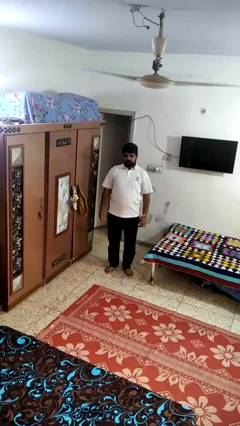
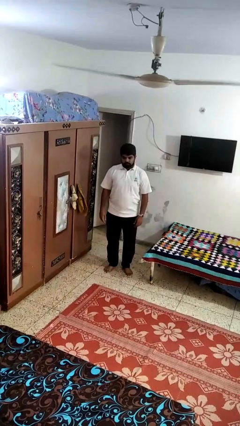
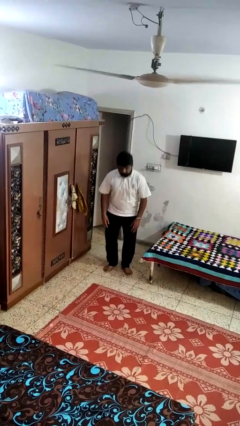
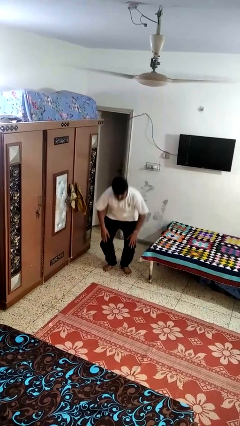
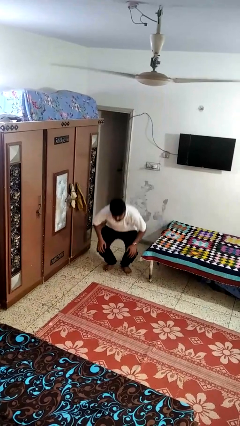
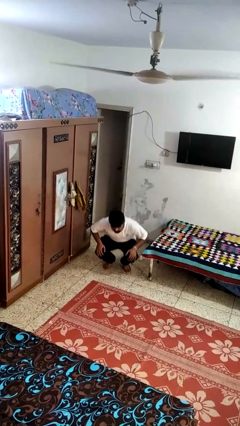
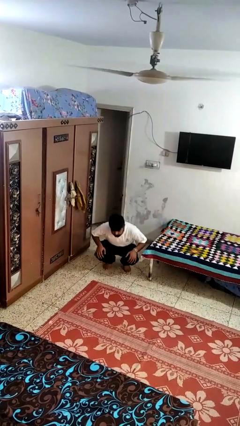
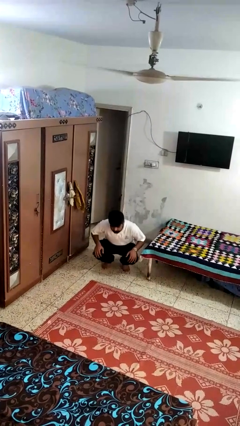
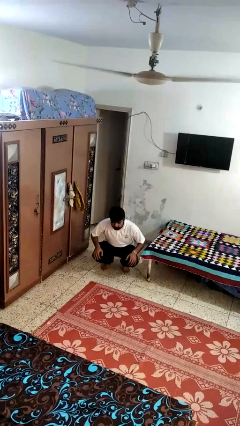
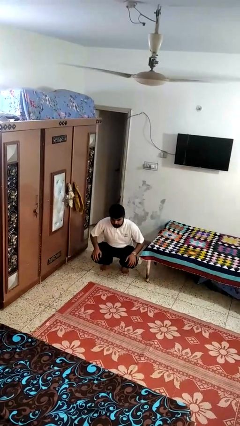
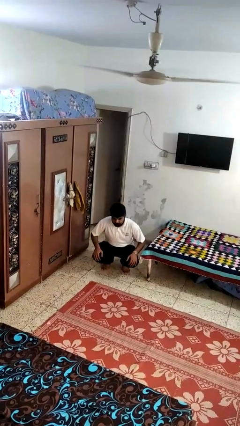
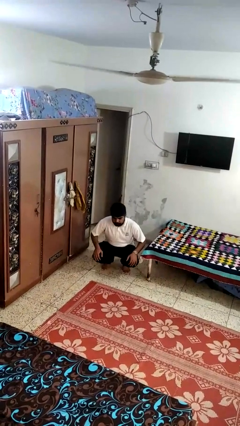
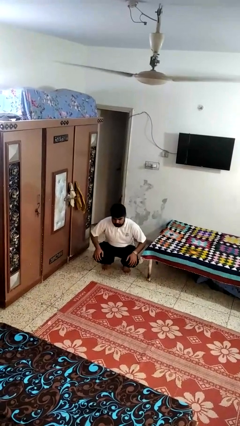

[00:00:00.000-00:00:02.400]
person squats

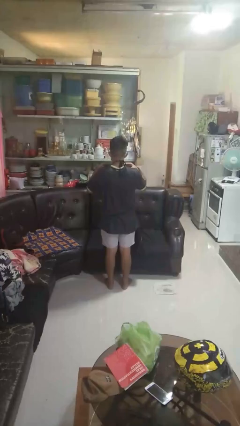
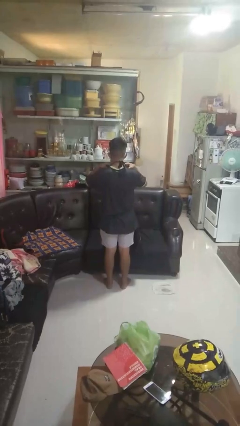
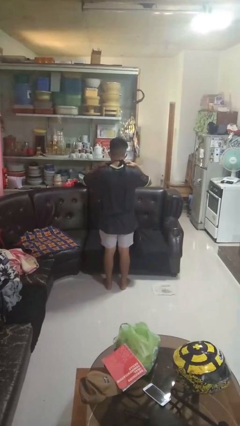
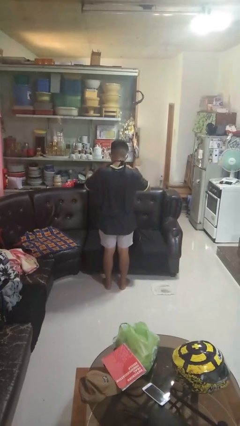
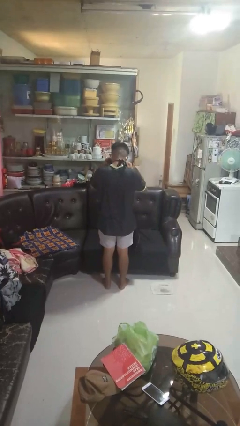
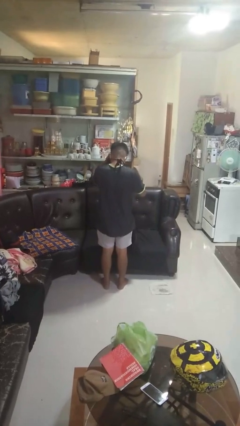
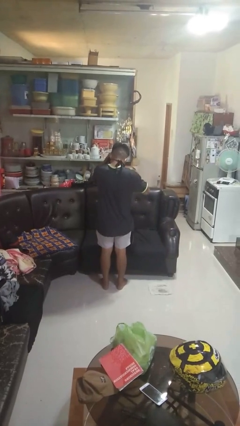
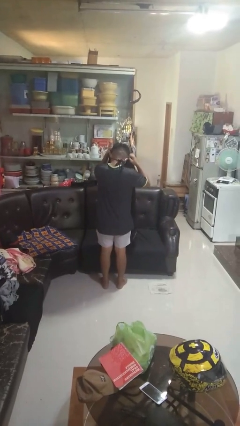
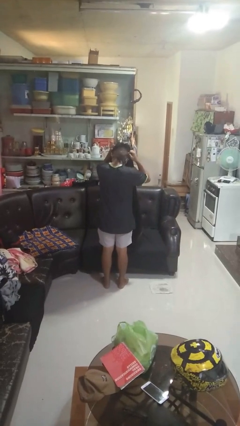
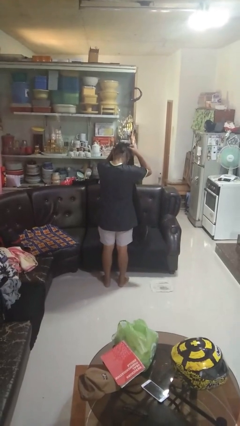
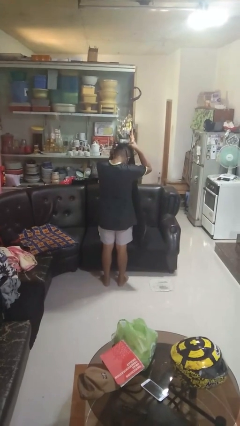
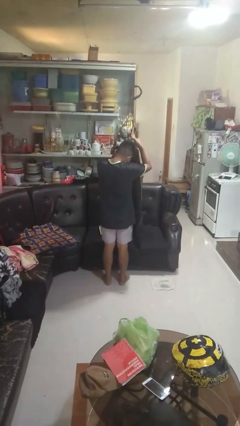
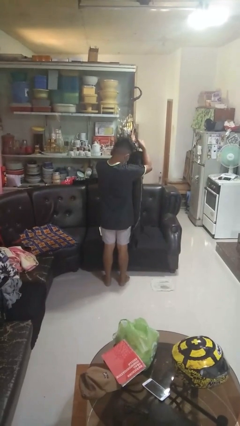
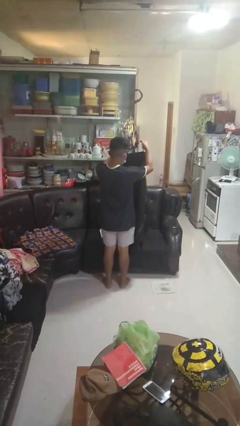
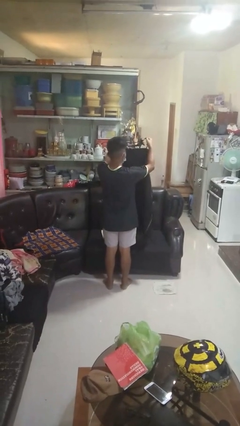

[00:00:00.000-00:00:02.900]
person takes off apron

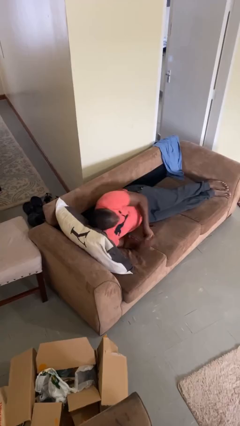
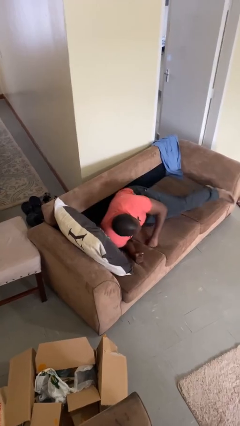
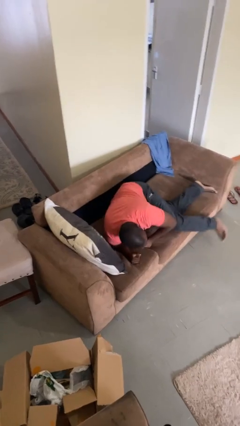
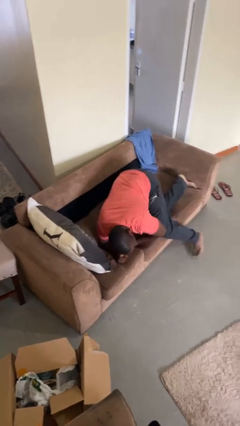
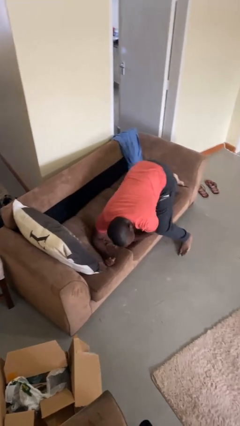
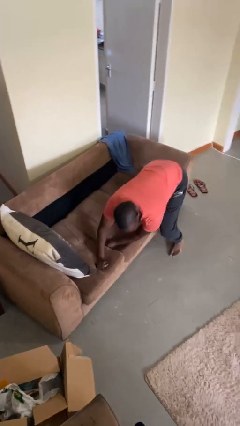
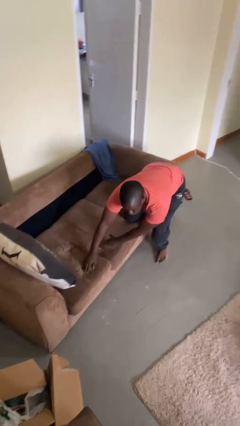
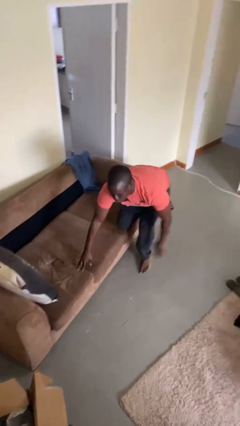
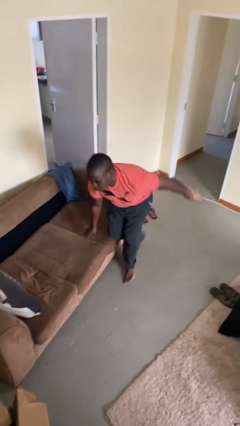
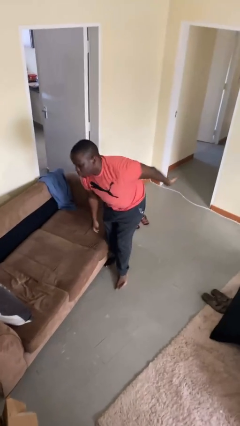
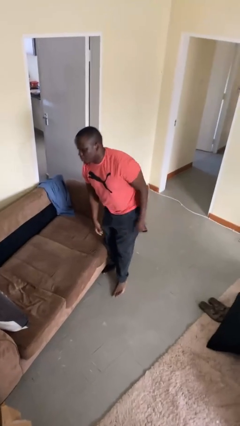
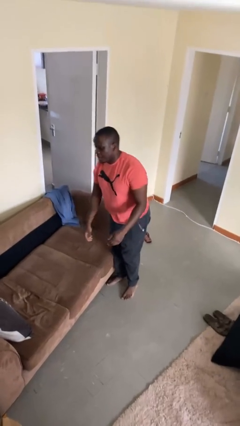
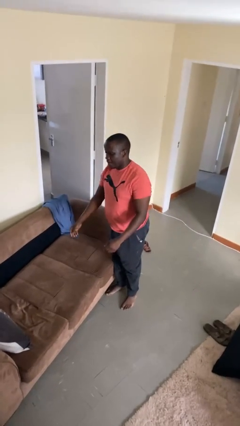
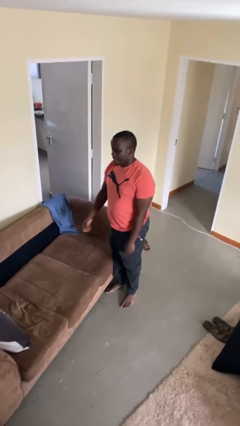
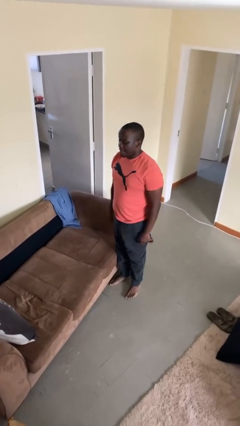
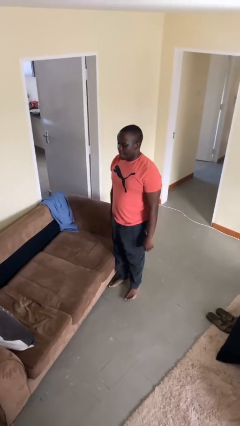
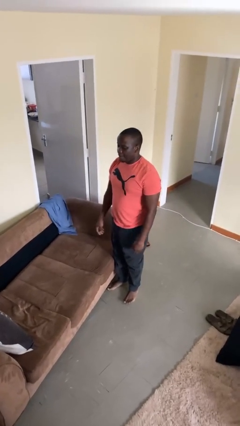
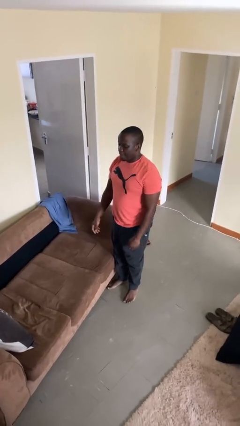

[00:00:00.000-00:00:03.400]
person stands up

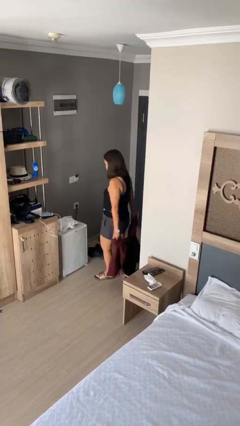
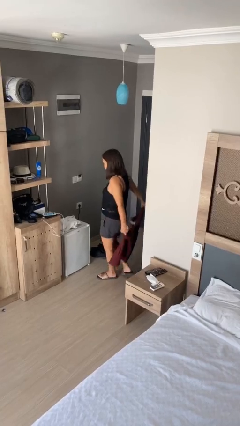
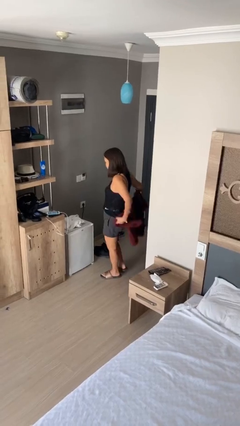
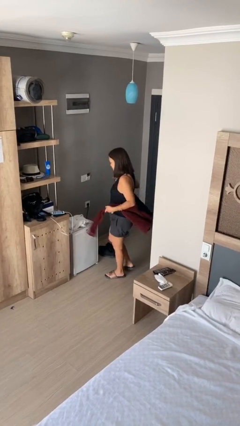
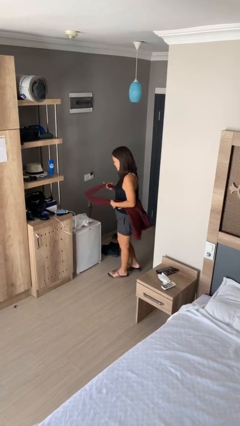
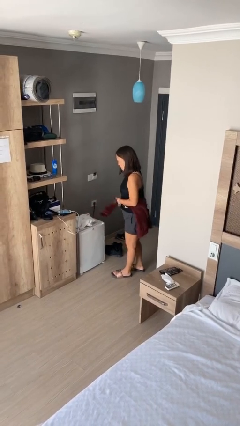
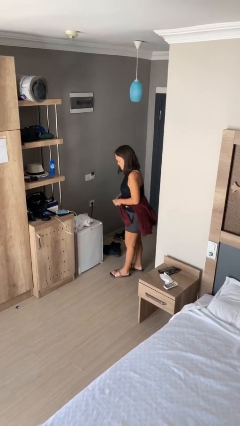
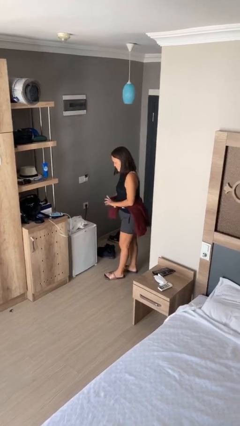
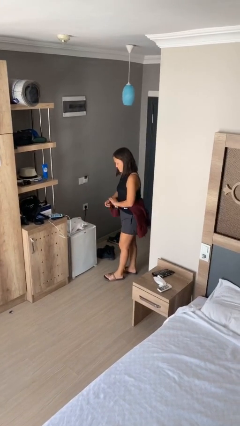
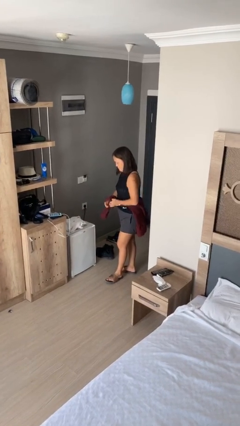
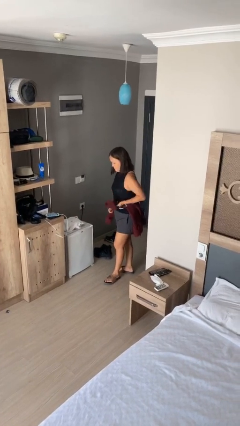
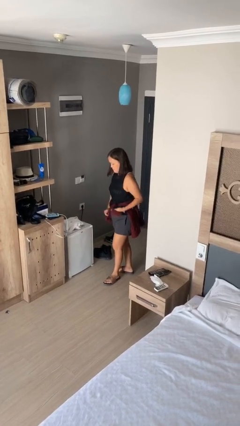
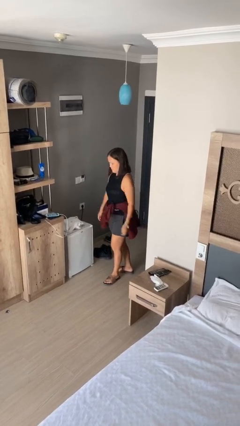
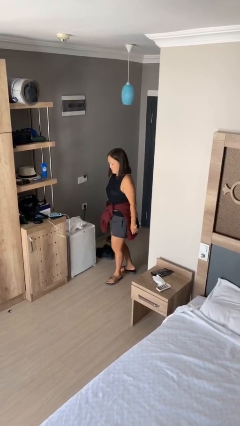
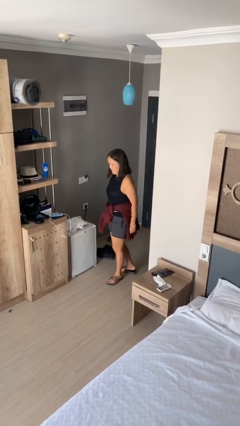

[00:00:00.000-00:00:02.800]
person ties jacket around waist

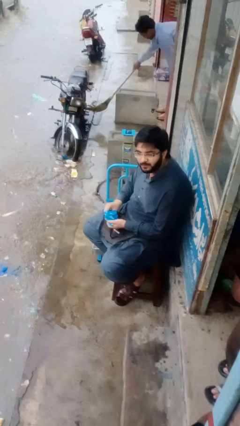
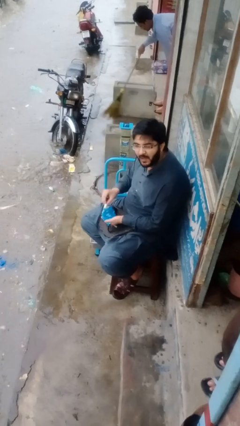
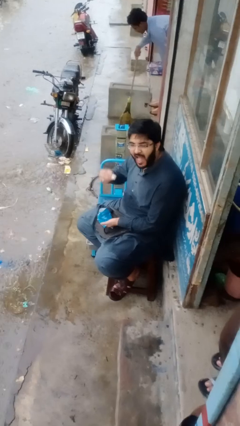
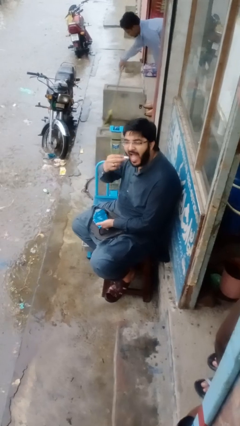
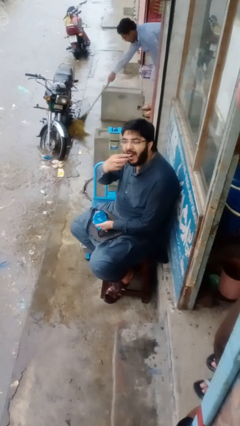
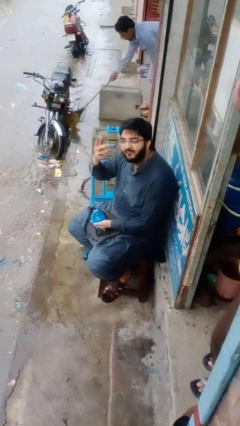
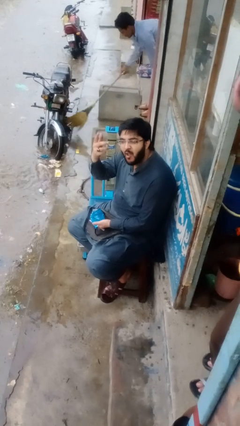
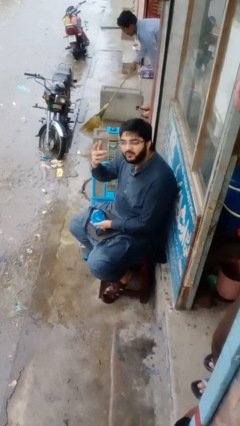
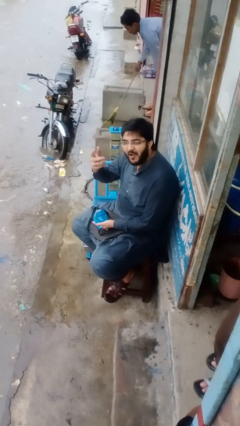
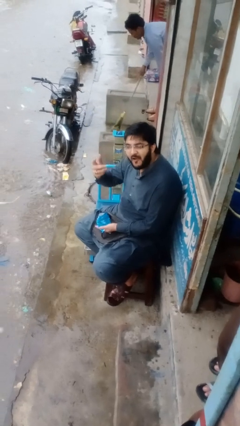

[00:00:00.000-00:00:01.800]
person eats snack from bag

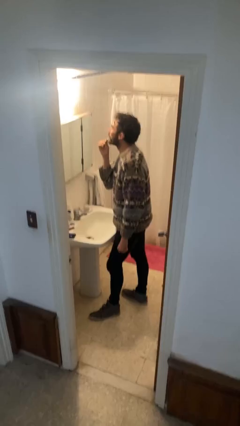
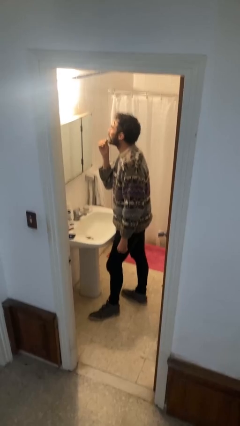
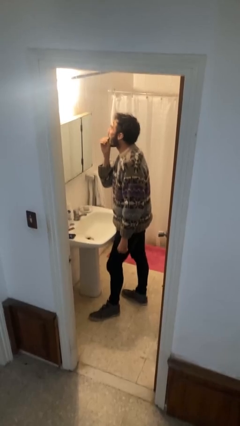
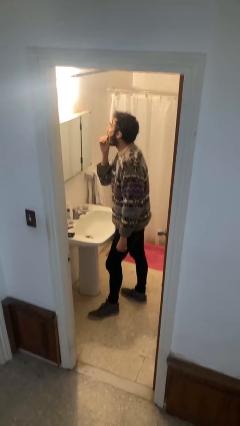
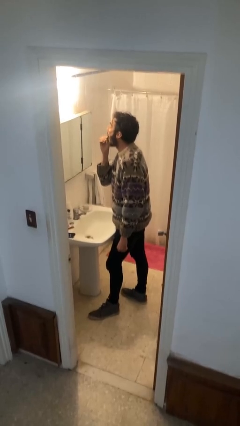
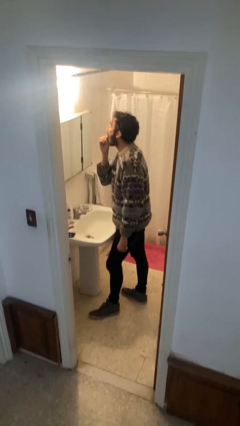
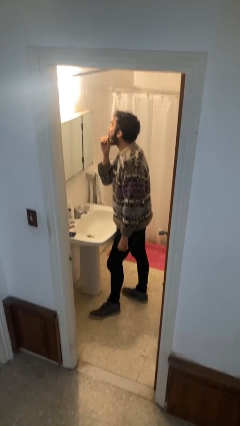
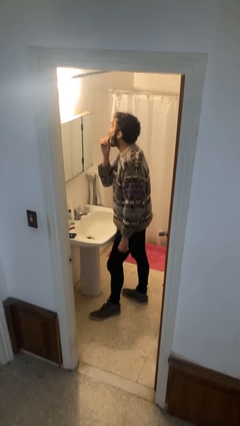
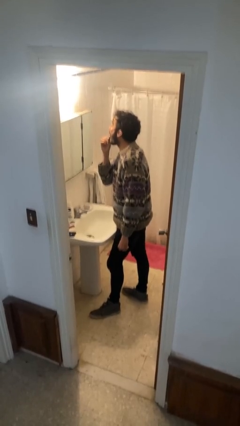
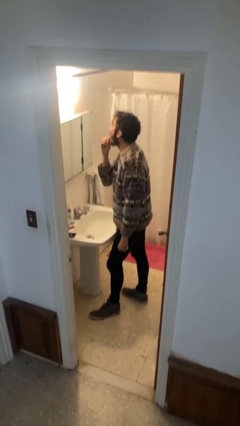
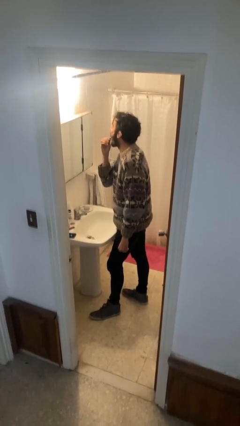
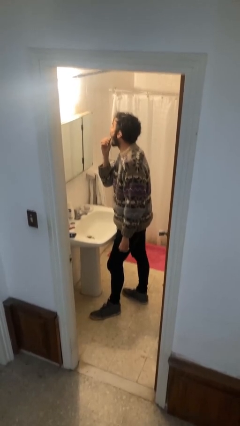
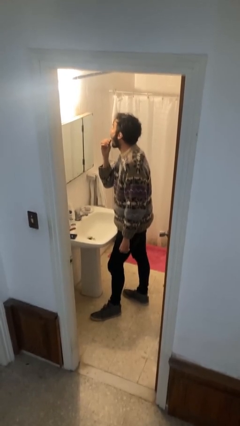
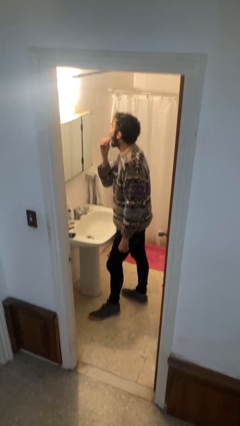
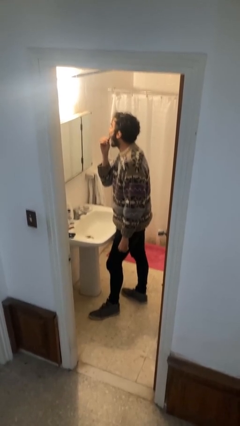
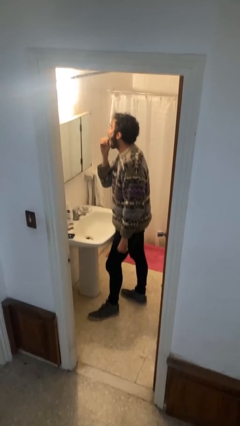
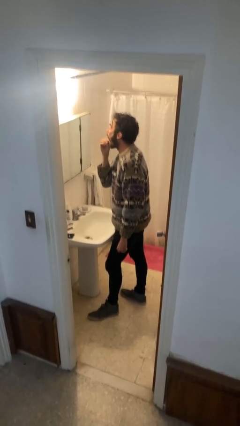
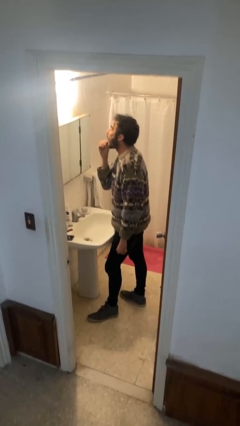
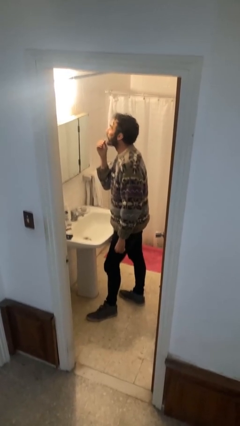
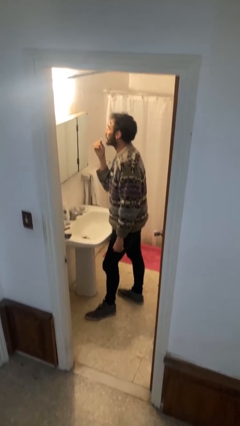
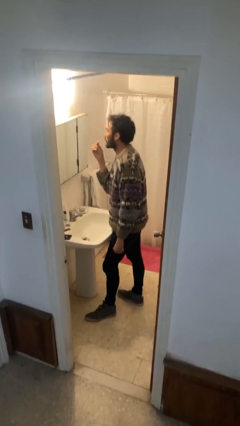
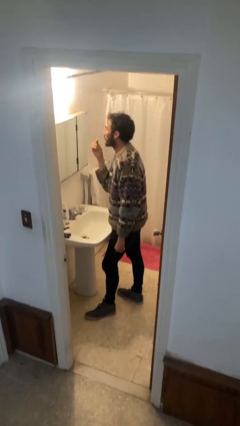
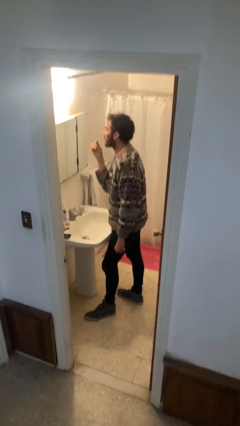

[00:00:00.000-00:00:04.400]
person applies lip makeup
